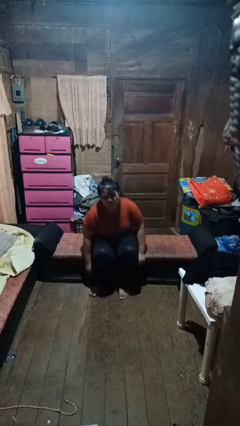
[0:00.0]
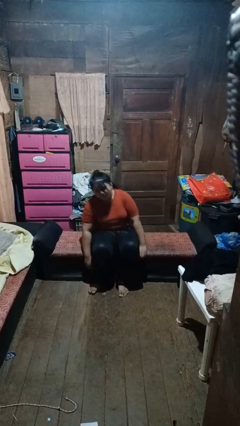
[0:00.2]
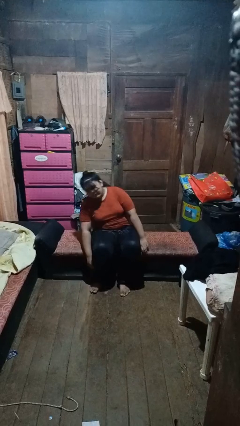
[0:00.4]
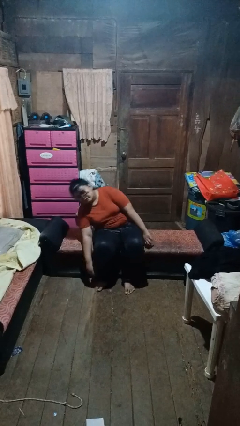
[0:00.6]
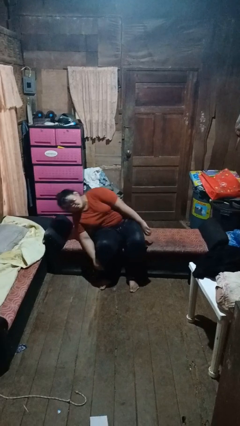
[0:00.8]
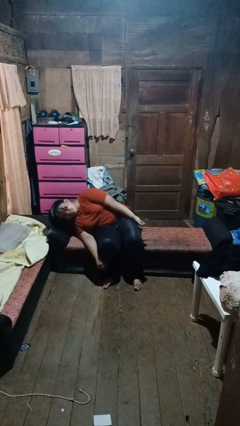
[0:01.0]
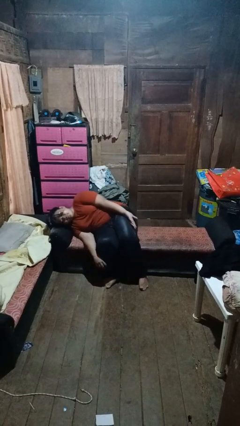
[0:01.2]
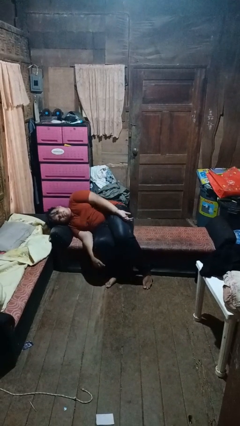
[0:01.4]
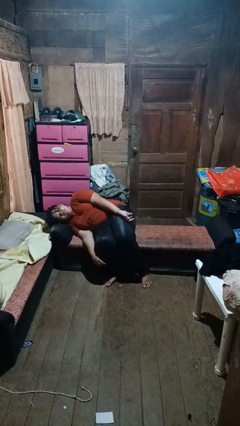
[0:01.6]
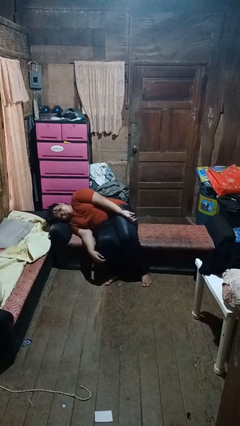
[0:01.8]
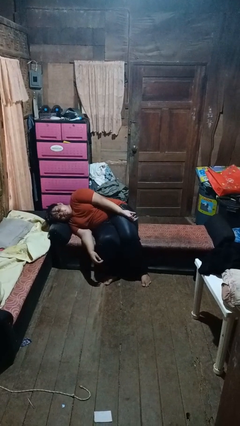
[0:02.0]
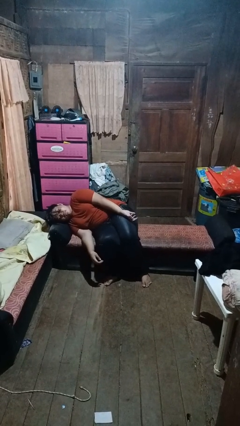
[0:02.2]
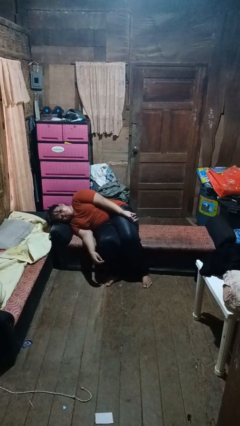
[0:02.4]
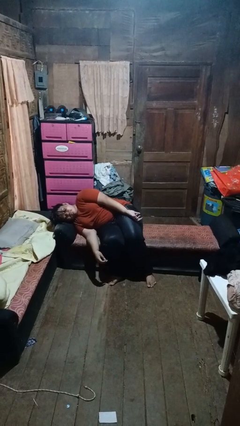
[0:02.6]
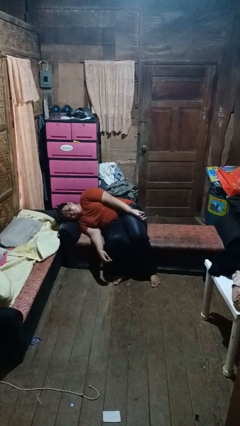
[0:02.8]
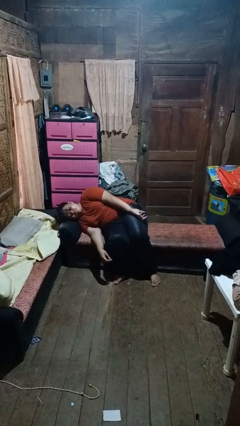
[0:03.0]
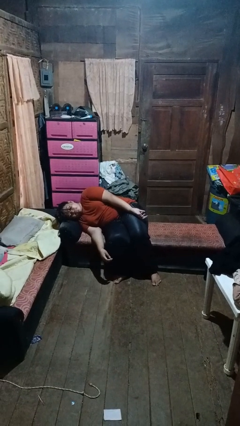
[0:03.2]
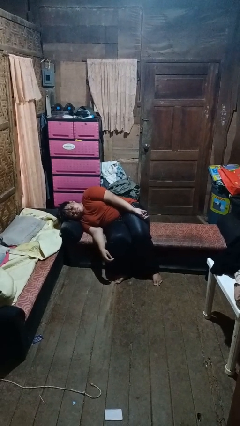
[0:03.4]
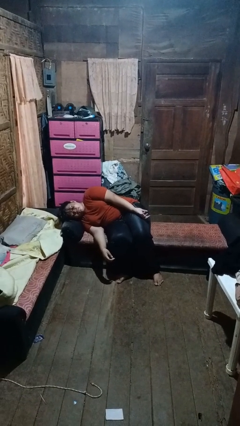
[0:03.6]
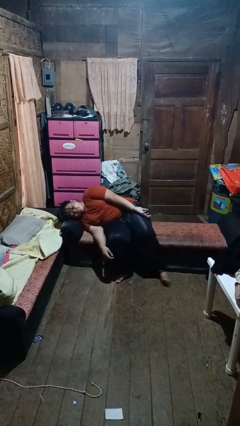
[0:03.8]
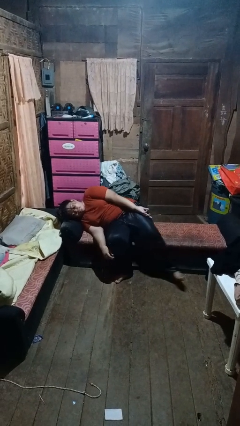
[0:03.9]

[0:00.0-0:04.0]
person lies down on couch

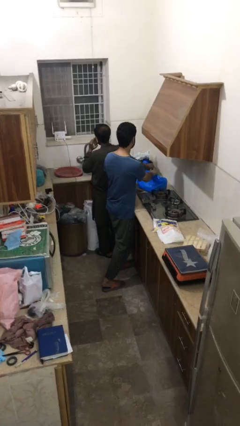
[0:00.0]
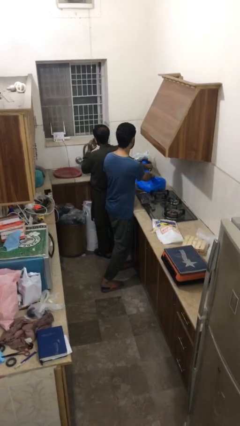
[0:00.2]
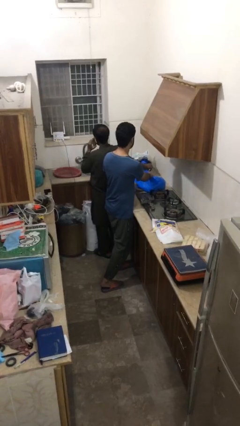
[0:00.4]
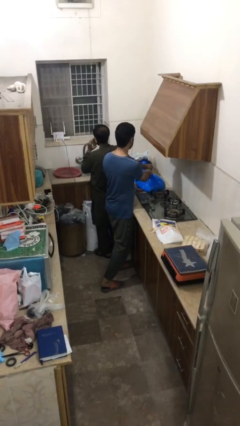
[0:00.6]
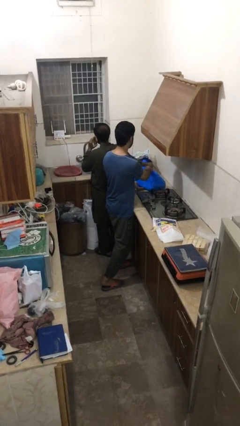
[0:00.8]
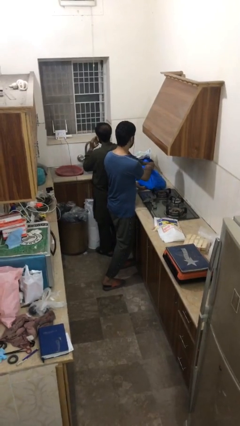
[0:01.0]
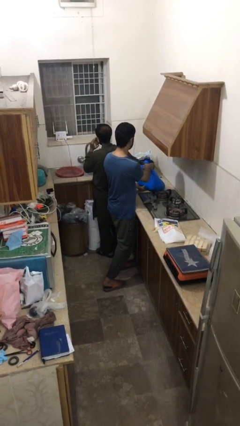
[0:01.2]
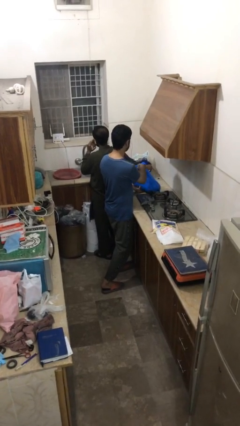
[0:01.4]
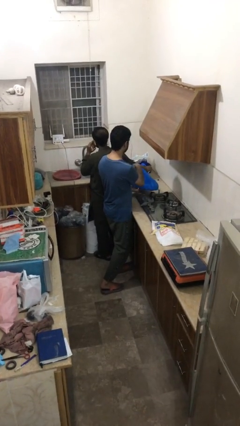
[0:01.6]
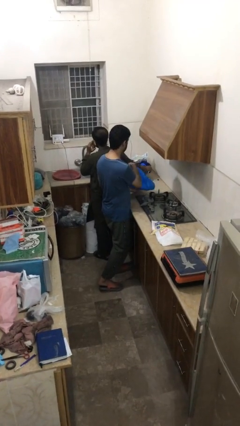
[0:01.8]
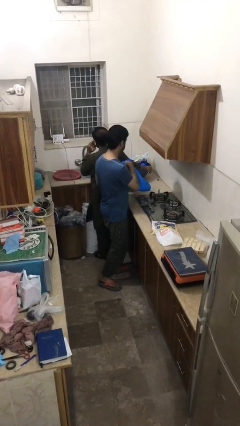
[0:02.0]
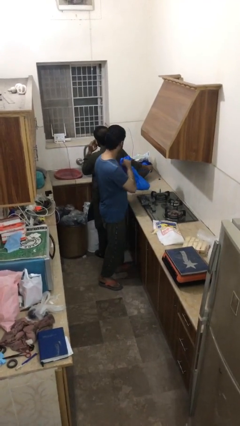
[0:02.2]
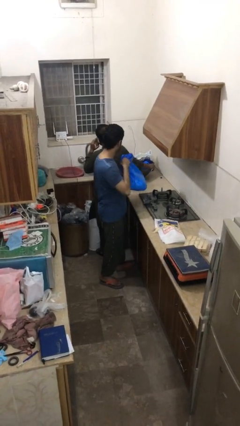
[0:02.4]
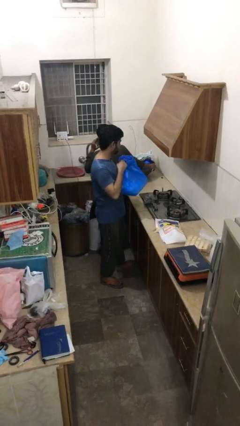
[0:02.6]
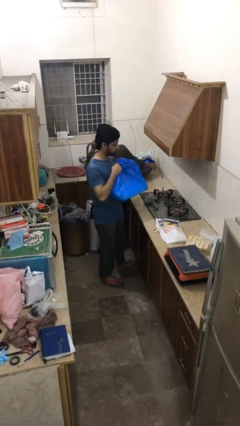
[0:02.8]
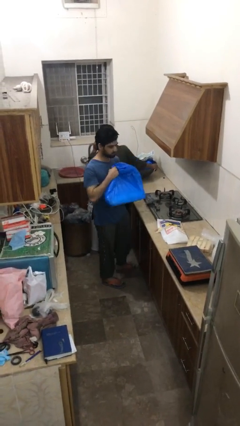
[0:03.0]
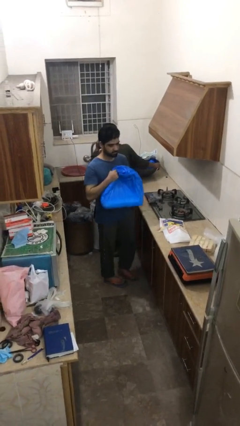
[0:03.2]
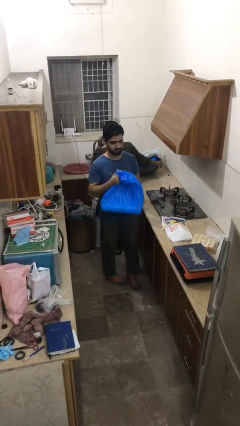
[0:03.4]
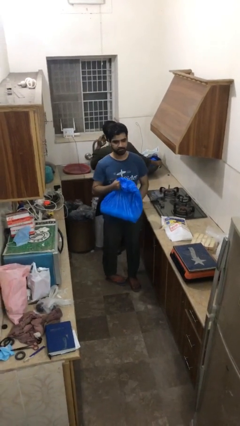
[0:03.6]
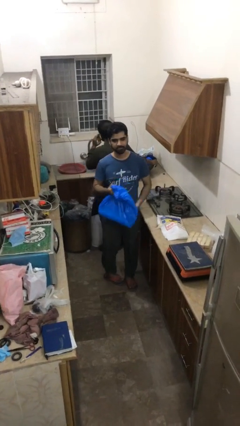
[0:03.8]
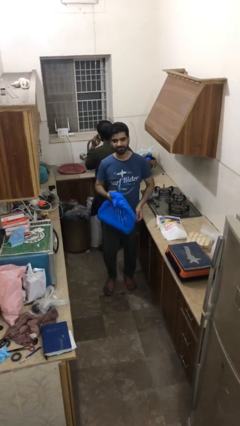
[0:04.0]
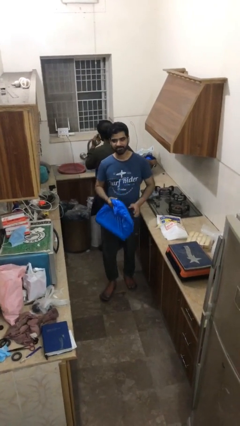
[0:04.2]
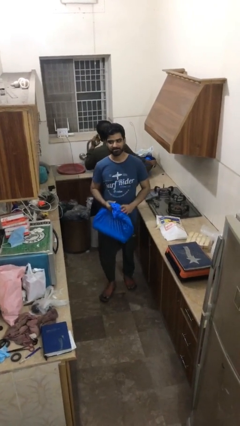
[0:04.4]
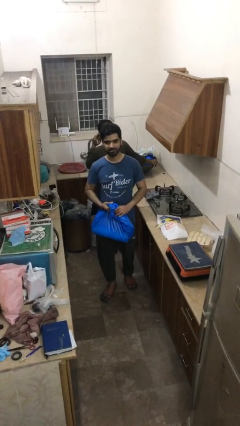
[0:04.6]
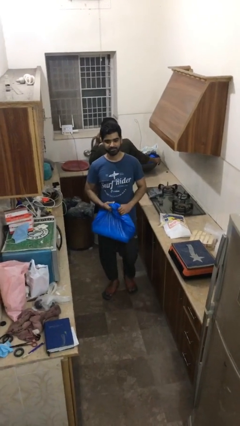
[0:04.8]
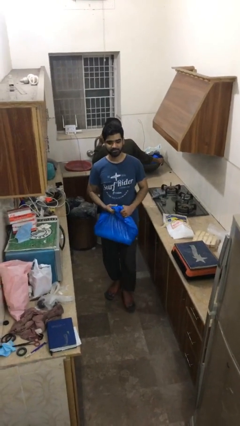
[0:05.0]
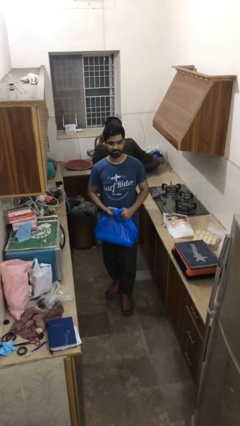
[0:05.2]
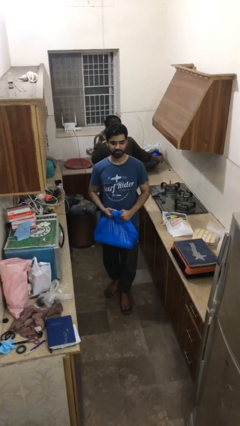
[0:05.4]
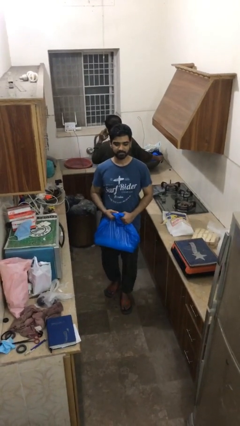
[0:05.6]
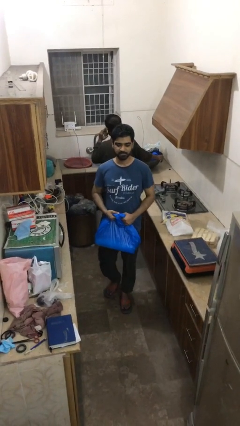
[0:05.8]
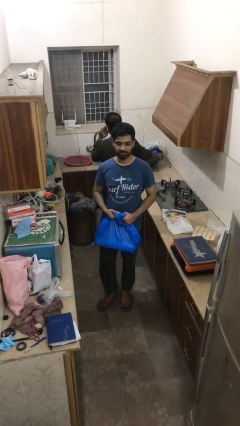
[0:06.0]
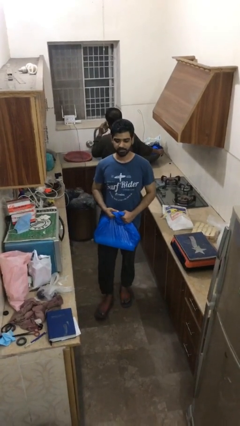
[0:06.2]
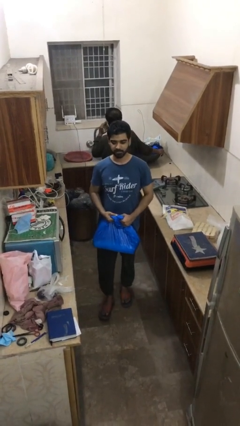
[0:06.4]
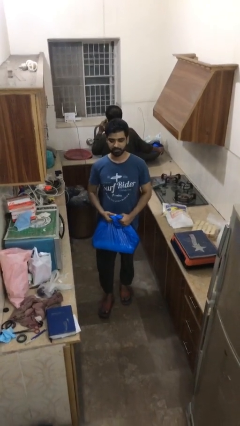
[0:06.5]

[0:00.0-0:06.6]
person steals object from person

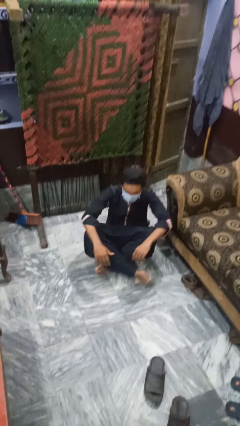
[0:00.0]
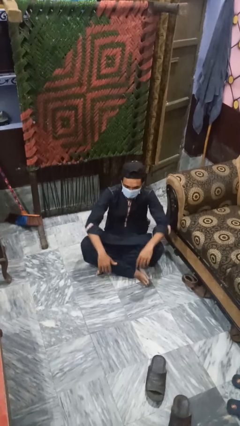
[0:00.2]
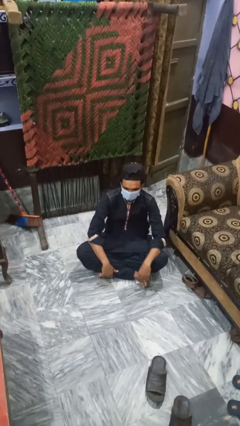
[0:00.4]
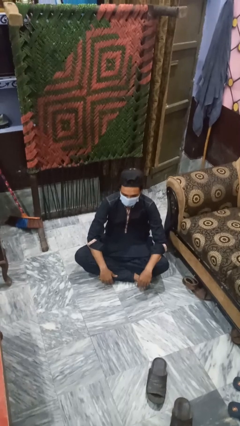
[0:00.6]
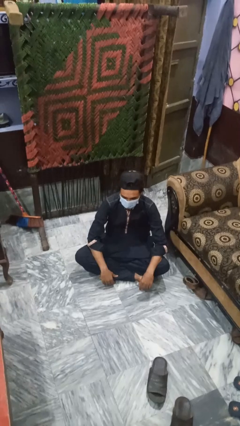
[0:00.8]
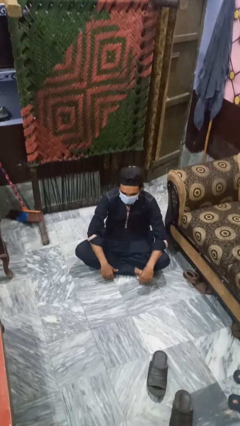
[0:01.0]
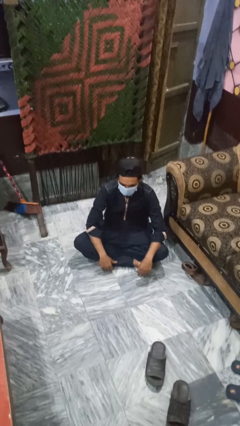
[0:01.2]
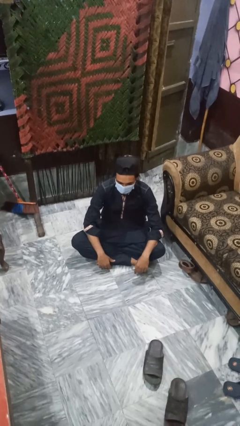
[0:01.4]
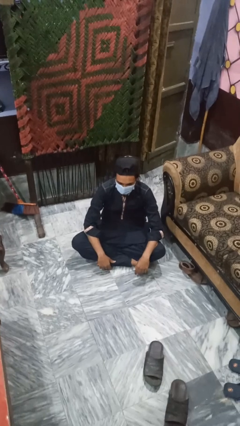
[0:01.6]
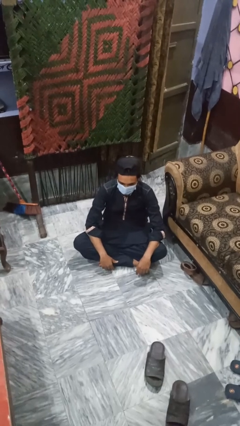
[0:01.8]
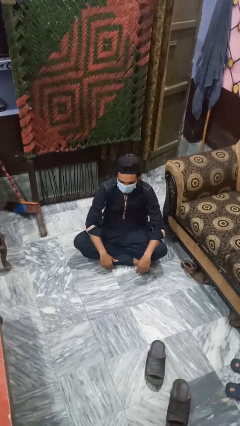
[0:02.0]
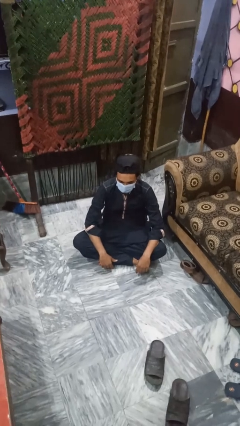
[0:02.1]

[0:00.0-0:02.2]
person sits crisscross

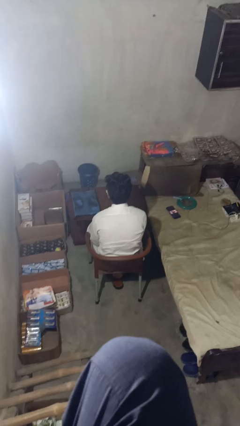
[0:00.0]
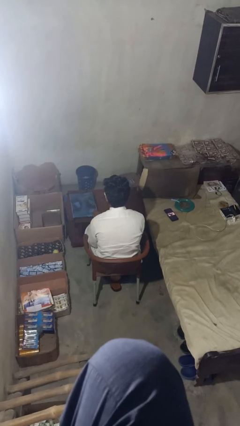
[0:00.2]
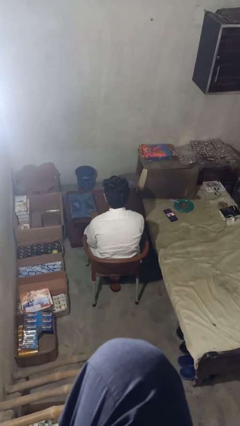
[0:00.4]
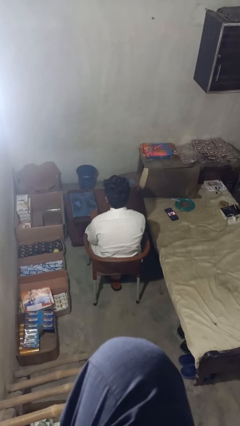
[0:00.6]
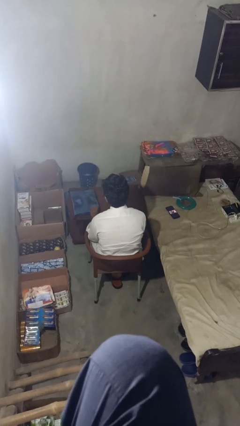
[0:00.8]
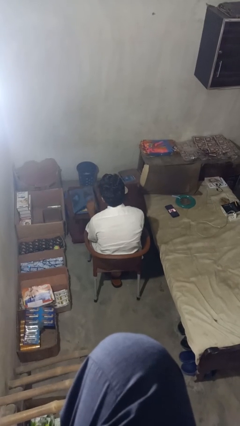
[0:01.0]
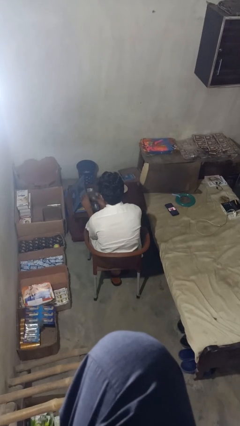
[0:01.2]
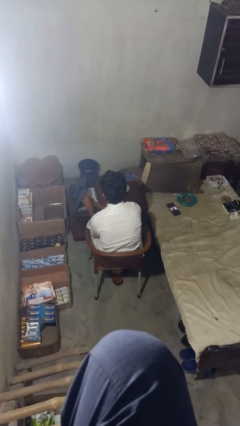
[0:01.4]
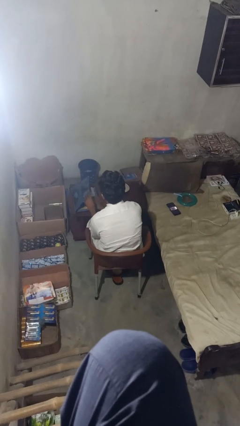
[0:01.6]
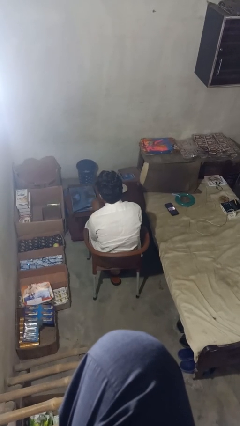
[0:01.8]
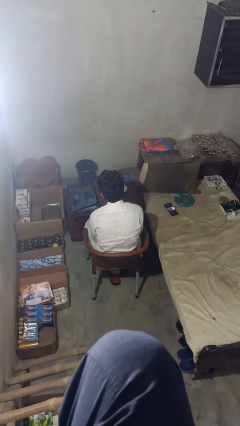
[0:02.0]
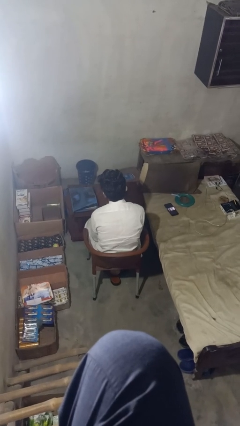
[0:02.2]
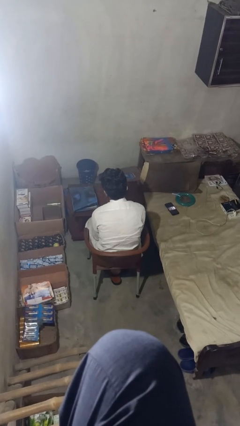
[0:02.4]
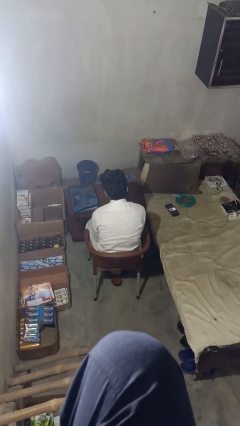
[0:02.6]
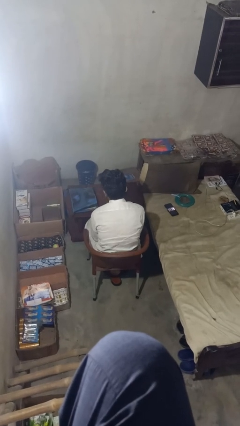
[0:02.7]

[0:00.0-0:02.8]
person takes object from bag

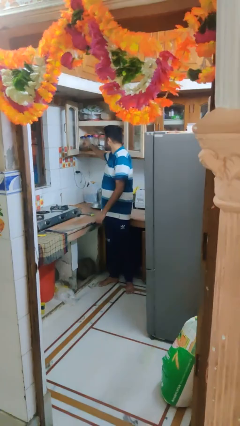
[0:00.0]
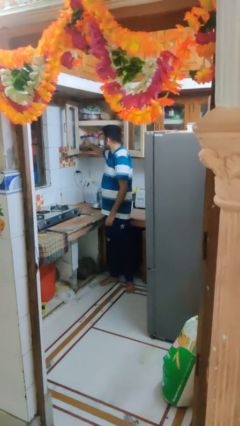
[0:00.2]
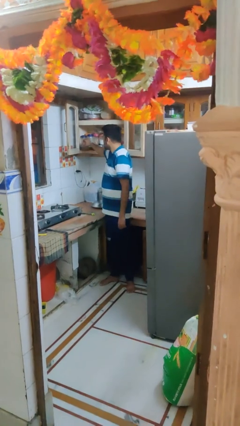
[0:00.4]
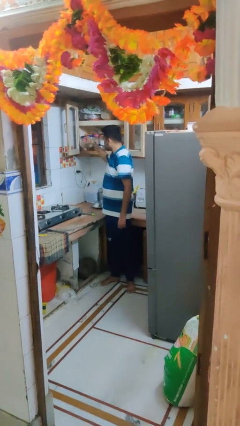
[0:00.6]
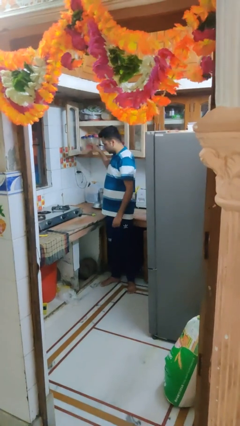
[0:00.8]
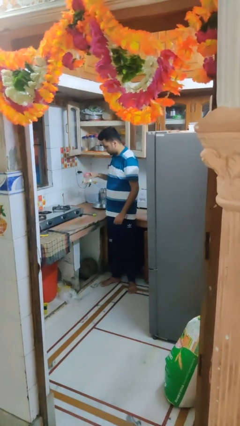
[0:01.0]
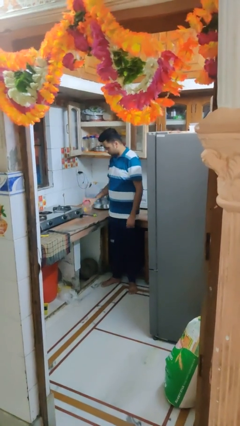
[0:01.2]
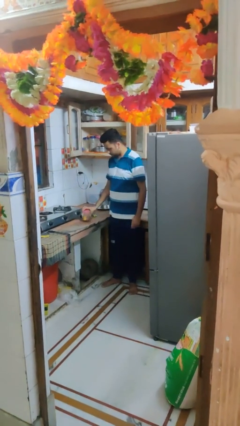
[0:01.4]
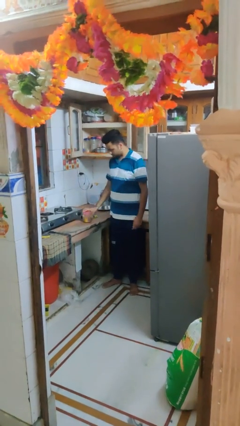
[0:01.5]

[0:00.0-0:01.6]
person takes object from cabinet

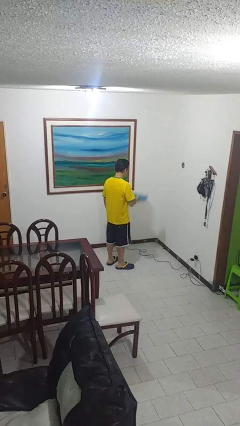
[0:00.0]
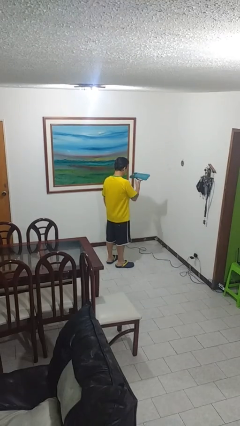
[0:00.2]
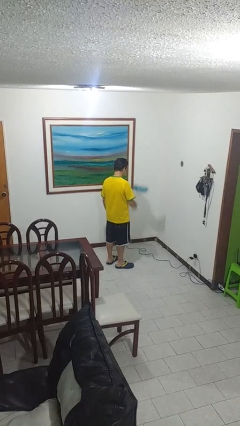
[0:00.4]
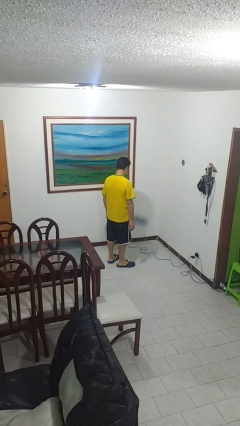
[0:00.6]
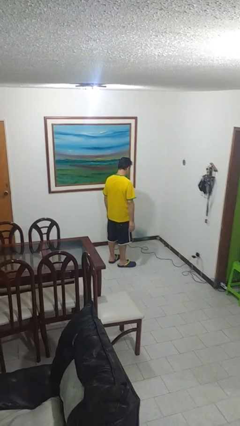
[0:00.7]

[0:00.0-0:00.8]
person throws object into air
